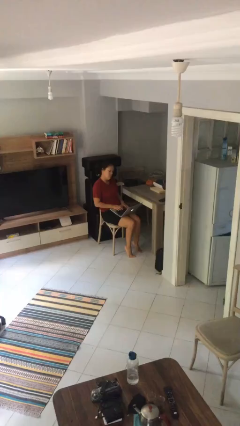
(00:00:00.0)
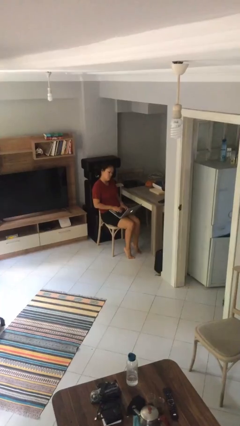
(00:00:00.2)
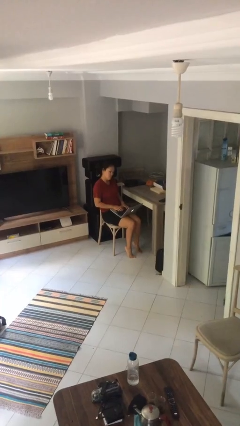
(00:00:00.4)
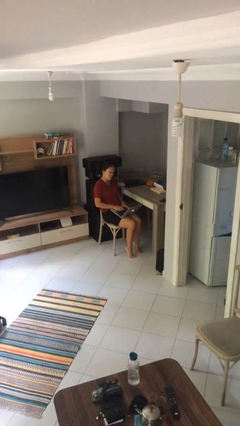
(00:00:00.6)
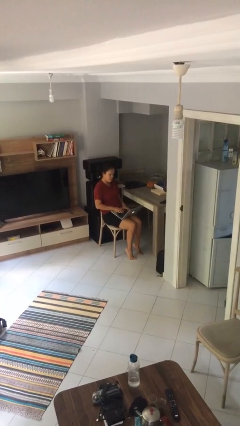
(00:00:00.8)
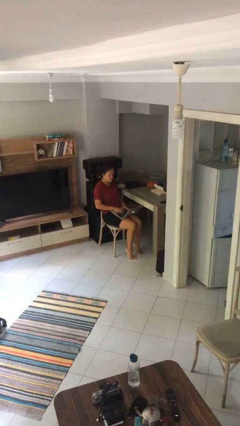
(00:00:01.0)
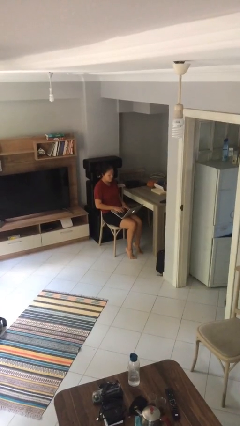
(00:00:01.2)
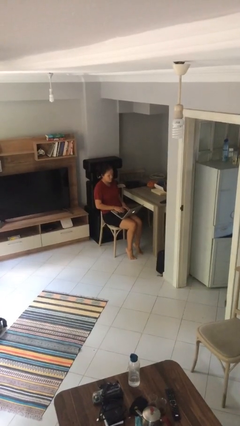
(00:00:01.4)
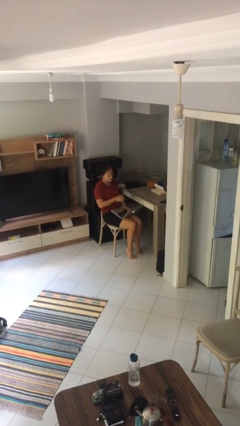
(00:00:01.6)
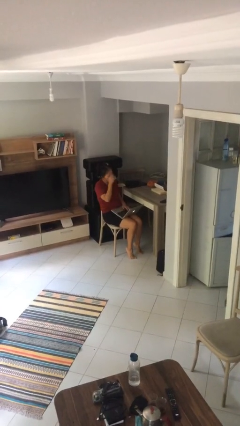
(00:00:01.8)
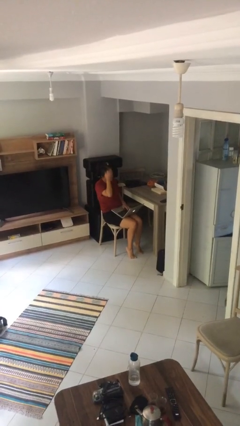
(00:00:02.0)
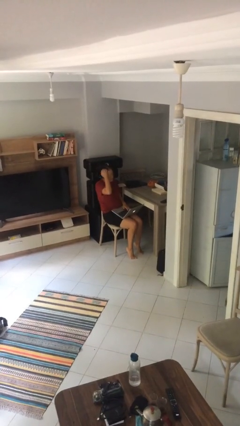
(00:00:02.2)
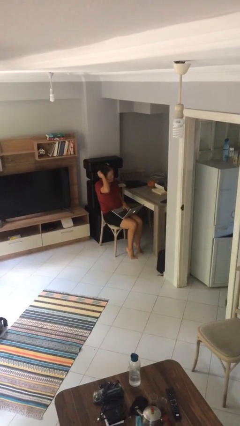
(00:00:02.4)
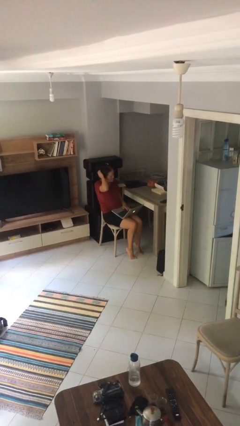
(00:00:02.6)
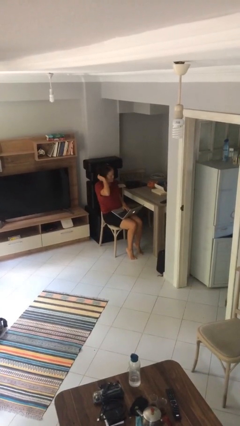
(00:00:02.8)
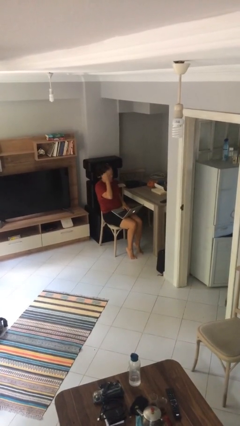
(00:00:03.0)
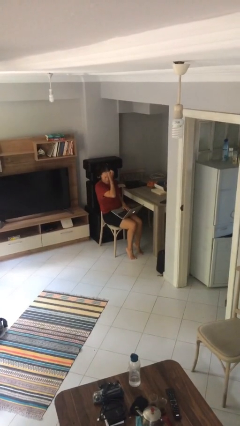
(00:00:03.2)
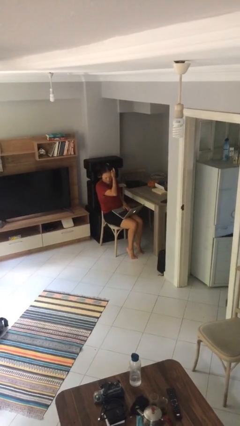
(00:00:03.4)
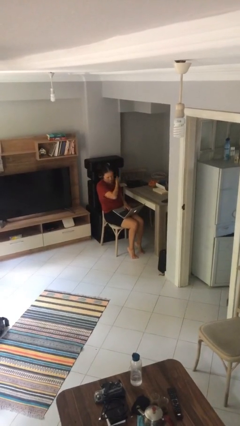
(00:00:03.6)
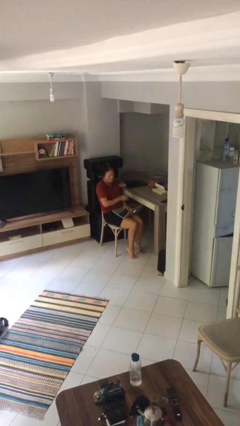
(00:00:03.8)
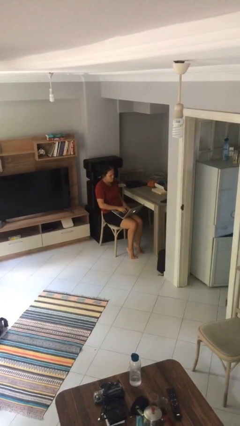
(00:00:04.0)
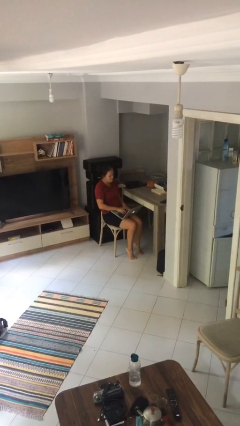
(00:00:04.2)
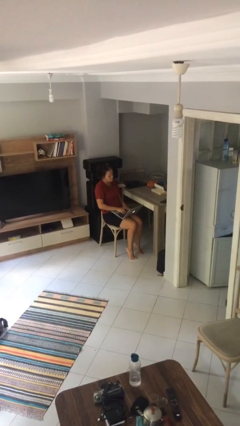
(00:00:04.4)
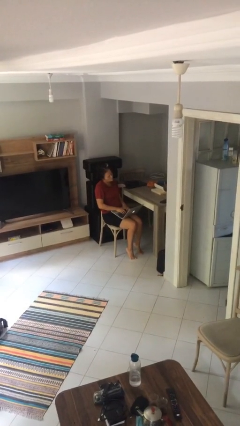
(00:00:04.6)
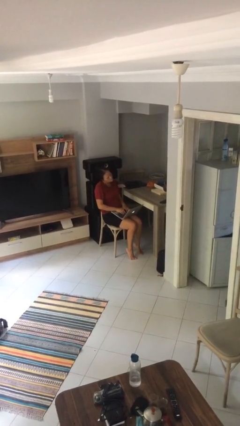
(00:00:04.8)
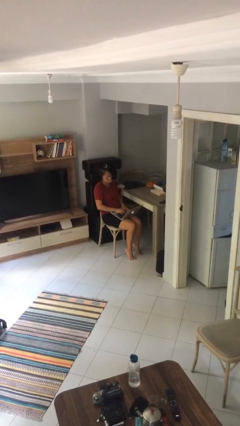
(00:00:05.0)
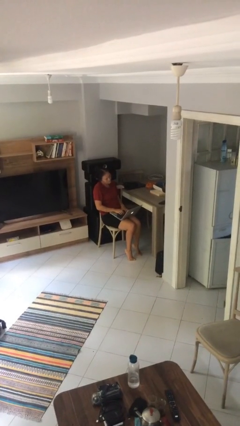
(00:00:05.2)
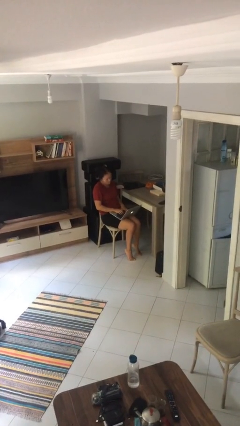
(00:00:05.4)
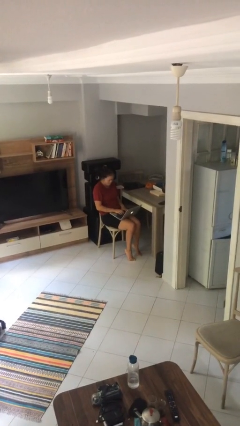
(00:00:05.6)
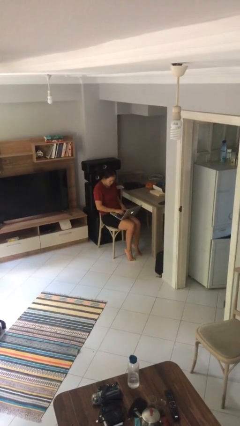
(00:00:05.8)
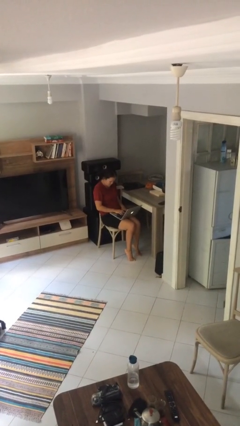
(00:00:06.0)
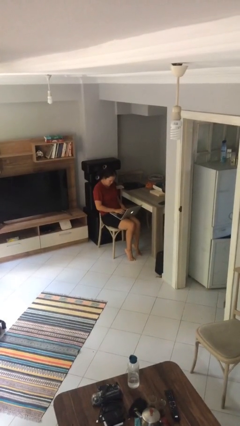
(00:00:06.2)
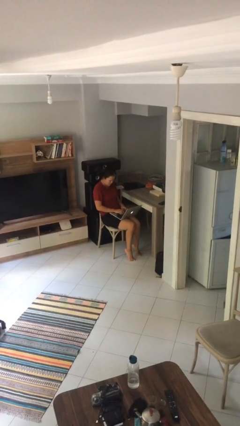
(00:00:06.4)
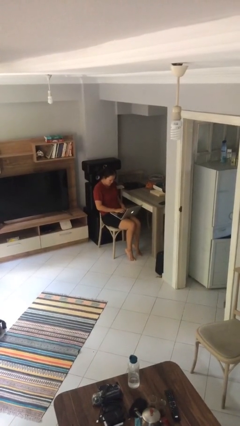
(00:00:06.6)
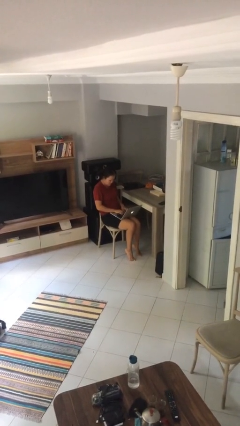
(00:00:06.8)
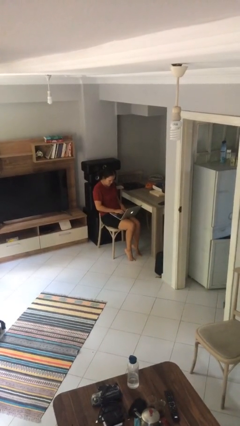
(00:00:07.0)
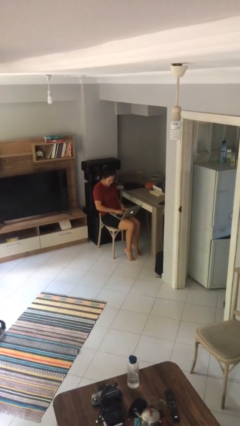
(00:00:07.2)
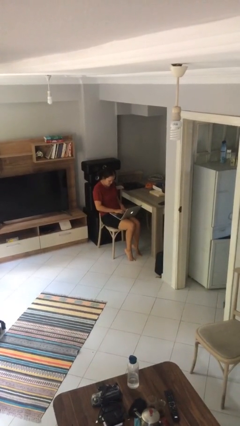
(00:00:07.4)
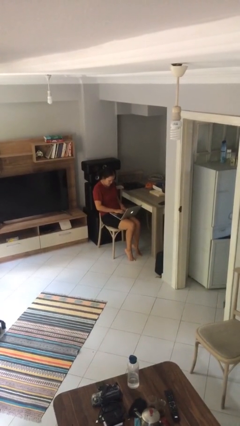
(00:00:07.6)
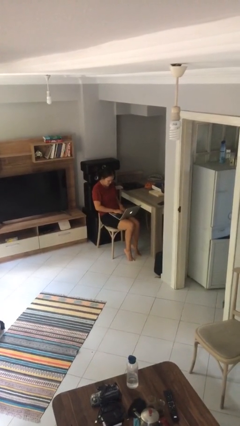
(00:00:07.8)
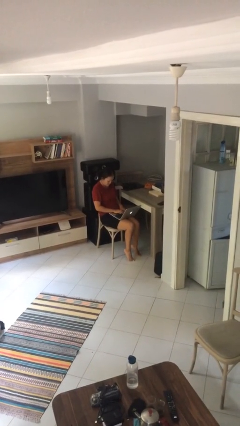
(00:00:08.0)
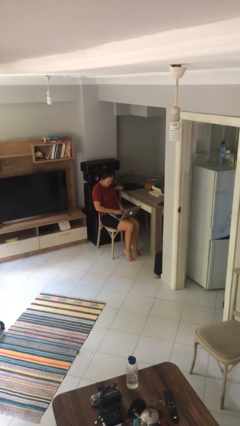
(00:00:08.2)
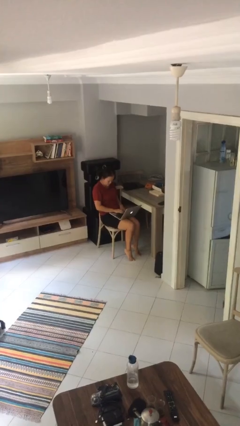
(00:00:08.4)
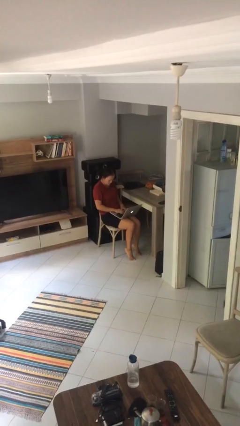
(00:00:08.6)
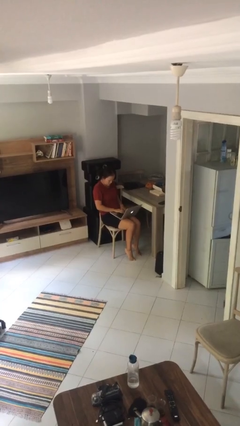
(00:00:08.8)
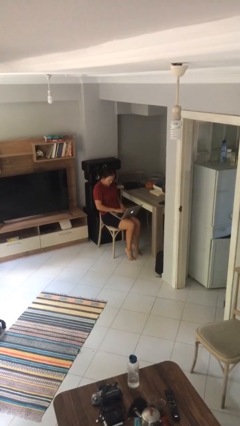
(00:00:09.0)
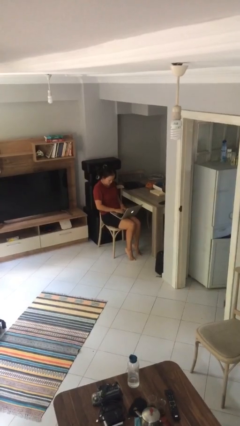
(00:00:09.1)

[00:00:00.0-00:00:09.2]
person interacts with laptop

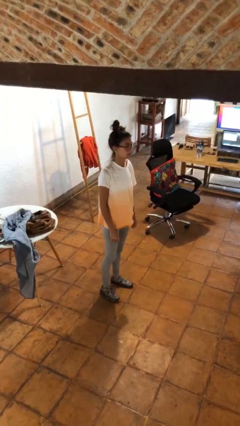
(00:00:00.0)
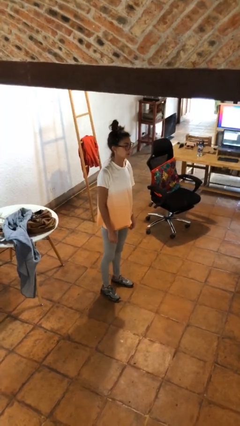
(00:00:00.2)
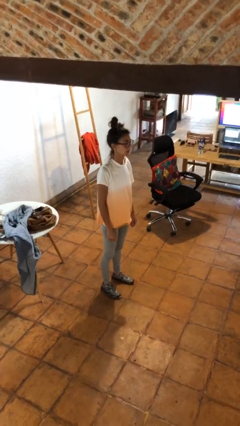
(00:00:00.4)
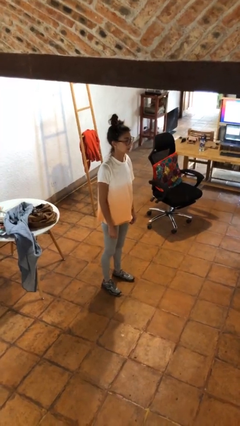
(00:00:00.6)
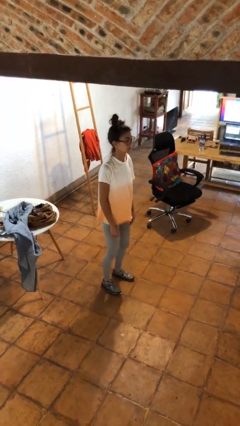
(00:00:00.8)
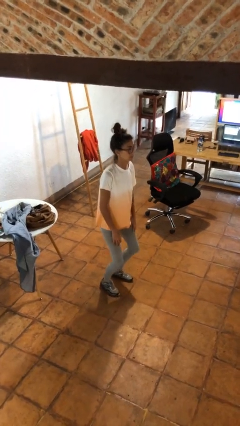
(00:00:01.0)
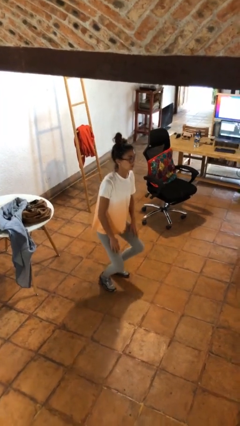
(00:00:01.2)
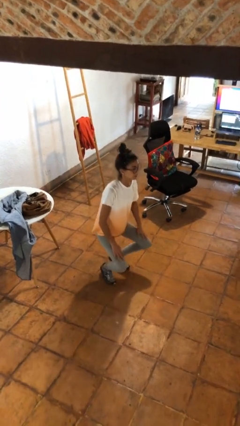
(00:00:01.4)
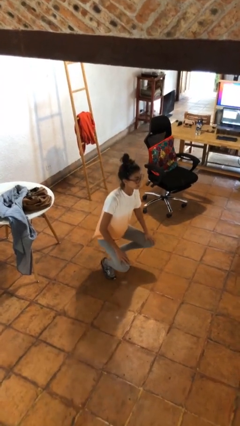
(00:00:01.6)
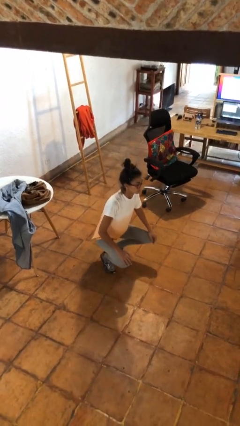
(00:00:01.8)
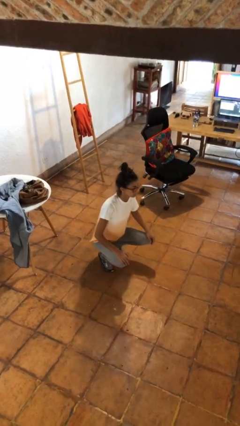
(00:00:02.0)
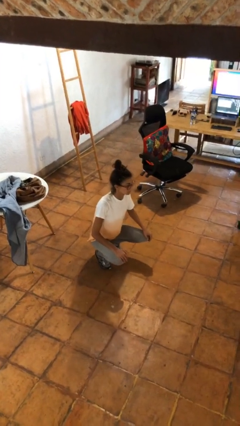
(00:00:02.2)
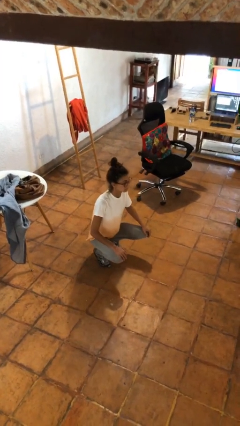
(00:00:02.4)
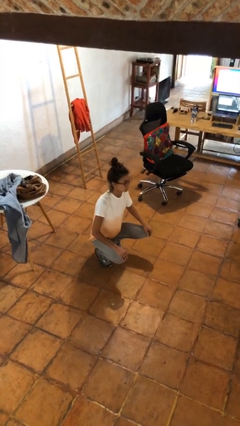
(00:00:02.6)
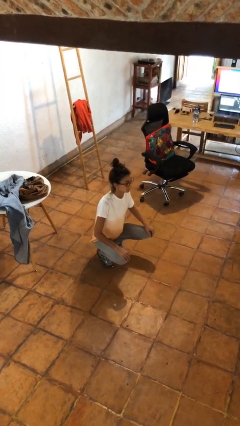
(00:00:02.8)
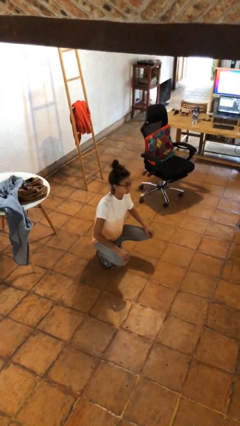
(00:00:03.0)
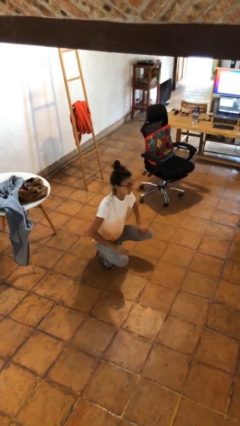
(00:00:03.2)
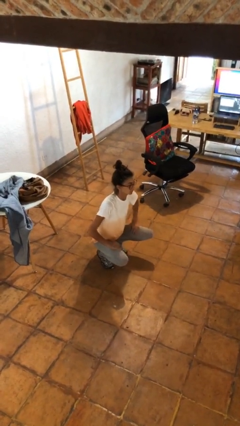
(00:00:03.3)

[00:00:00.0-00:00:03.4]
person squats

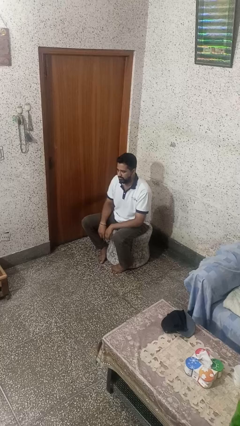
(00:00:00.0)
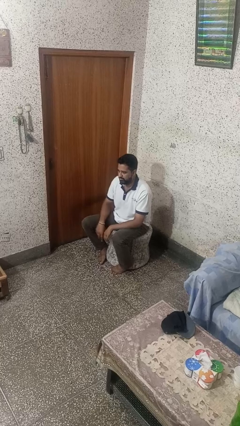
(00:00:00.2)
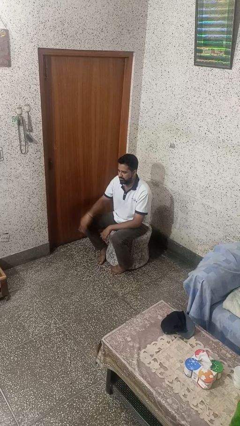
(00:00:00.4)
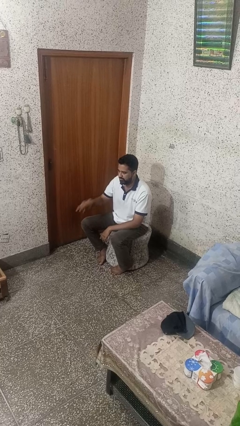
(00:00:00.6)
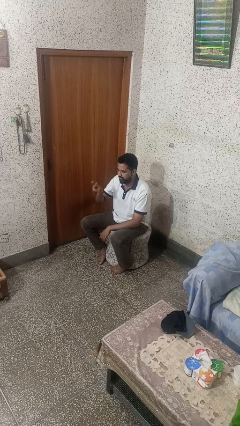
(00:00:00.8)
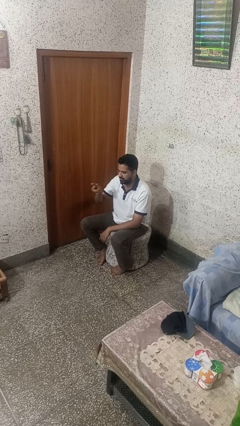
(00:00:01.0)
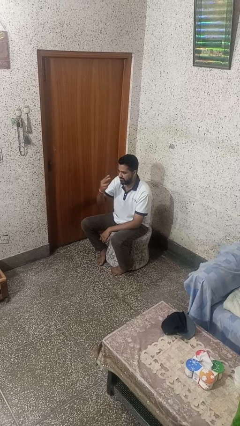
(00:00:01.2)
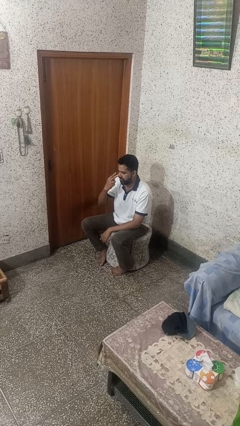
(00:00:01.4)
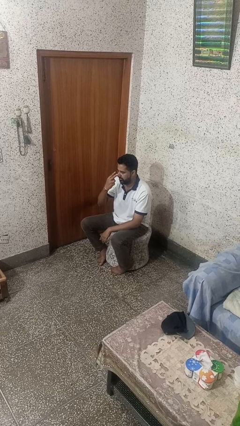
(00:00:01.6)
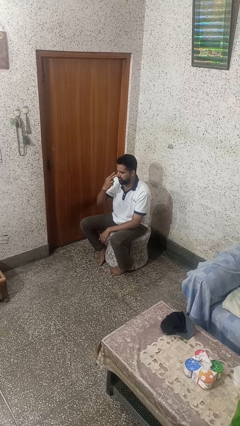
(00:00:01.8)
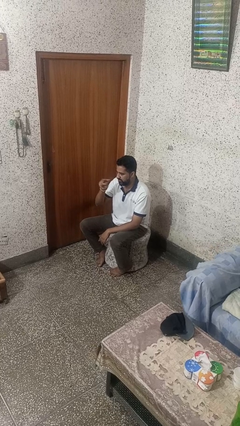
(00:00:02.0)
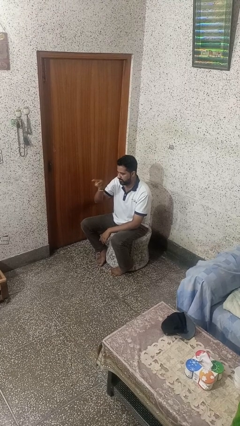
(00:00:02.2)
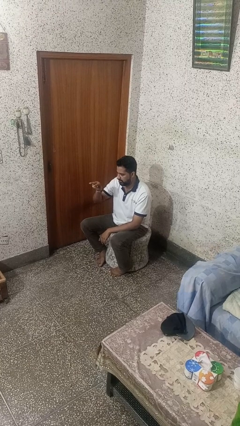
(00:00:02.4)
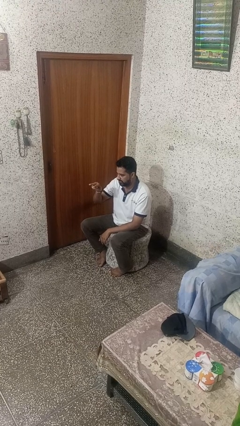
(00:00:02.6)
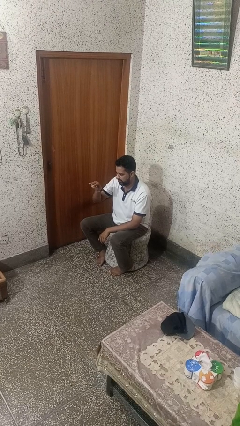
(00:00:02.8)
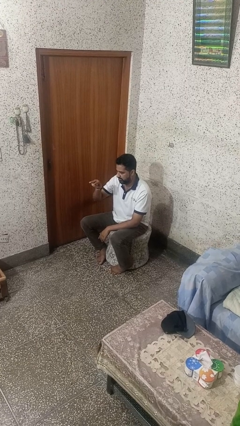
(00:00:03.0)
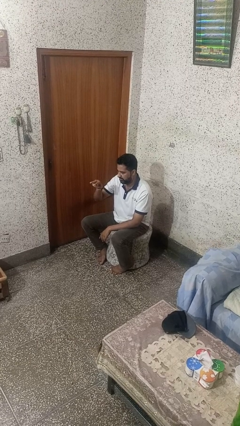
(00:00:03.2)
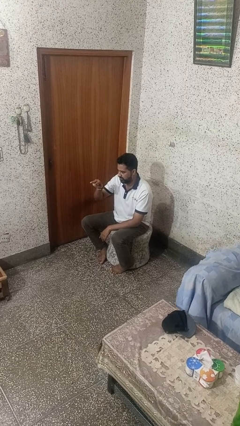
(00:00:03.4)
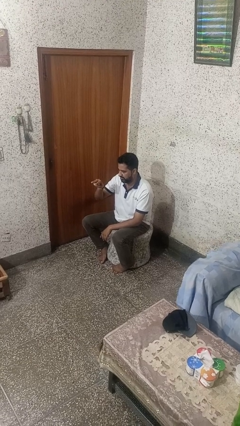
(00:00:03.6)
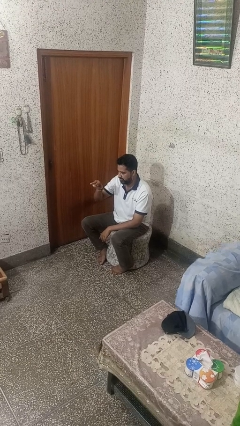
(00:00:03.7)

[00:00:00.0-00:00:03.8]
person gestures watch closely

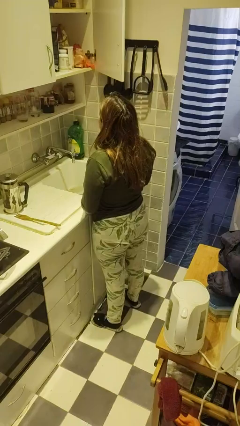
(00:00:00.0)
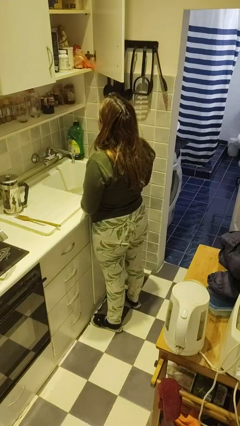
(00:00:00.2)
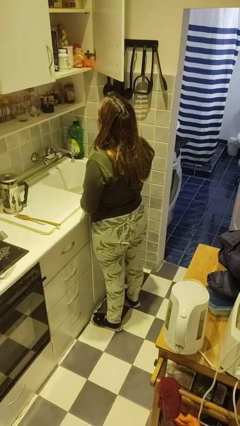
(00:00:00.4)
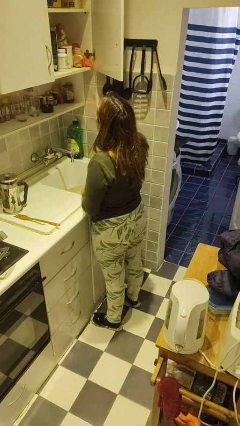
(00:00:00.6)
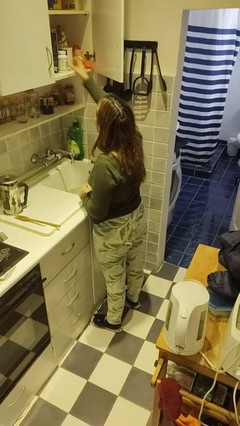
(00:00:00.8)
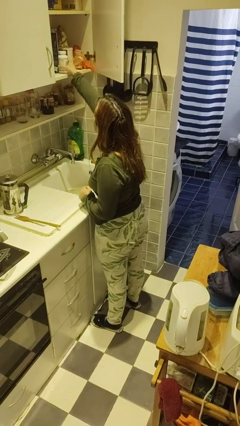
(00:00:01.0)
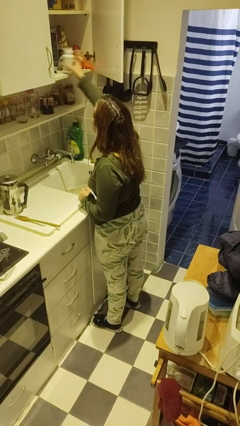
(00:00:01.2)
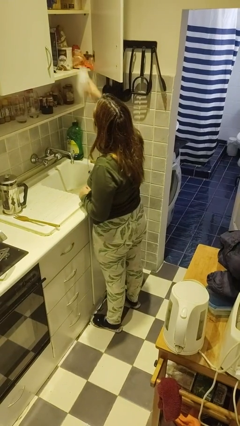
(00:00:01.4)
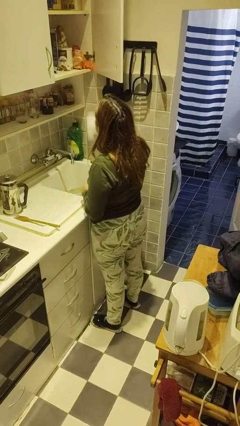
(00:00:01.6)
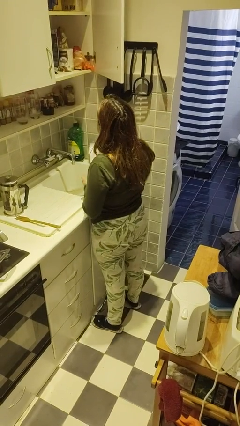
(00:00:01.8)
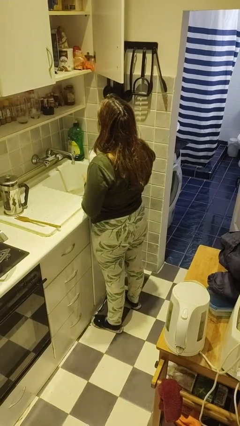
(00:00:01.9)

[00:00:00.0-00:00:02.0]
person takes object from cabinet
